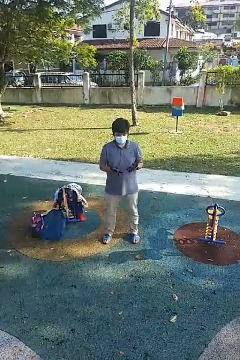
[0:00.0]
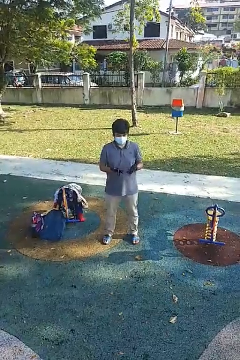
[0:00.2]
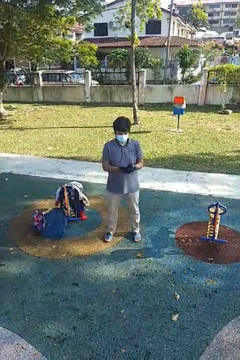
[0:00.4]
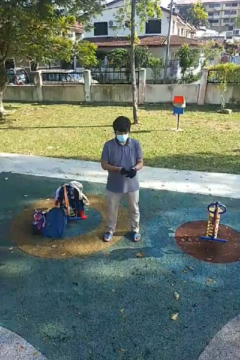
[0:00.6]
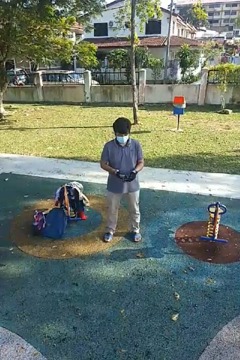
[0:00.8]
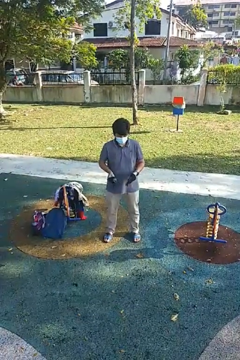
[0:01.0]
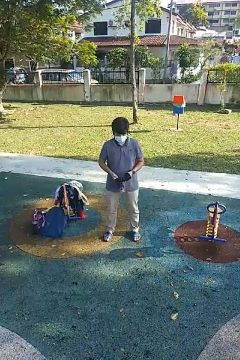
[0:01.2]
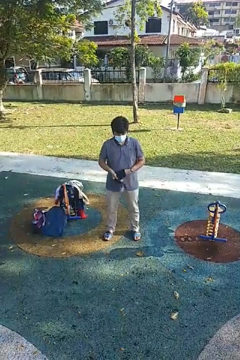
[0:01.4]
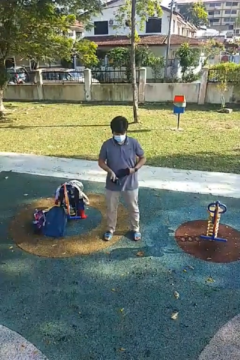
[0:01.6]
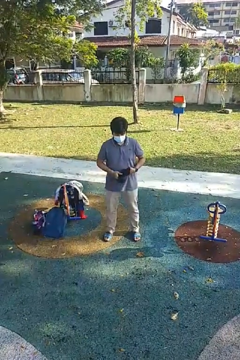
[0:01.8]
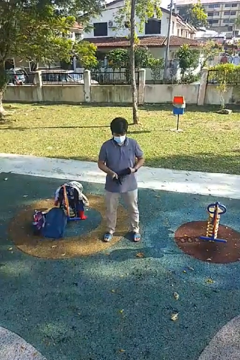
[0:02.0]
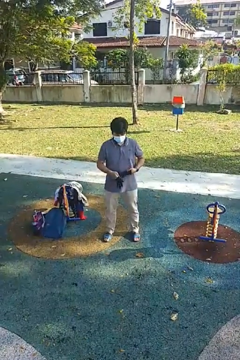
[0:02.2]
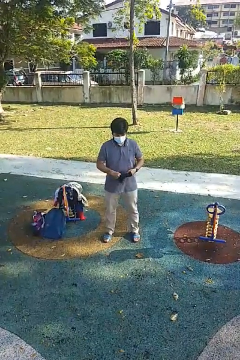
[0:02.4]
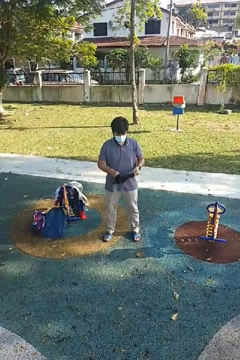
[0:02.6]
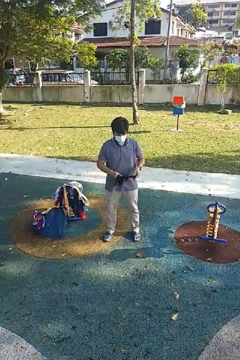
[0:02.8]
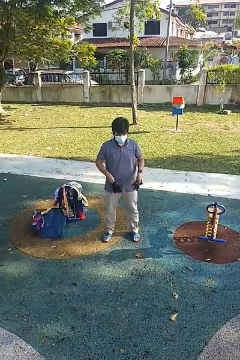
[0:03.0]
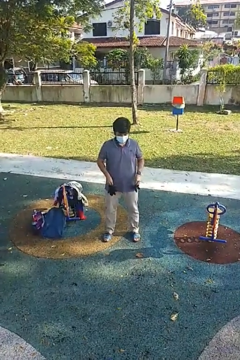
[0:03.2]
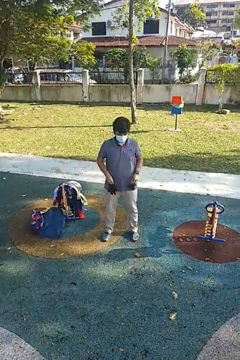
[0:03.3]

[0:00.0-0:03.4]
person takes off gloves

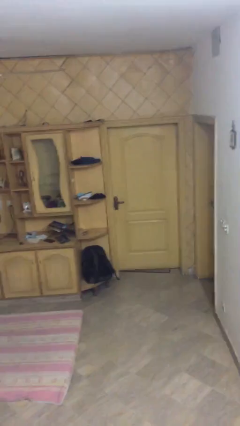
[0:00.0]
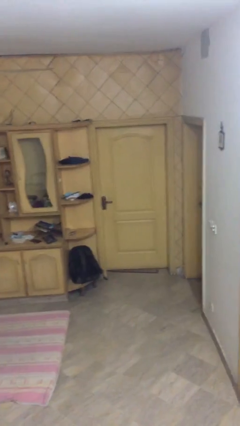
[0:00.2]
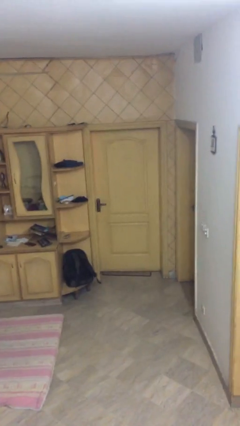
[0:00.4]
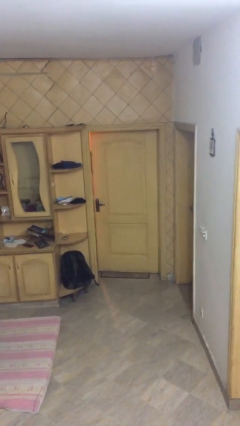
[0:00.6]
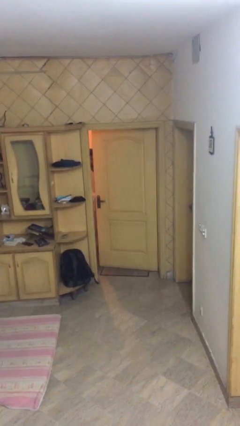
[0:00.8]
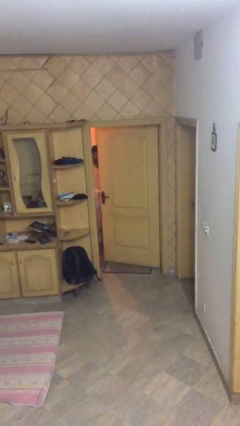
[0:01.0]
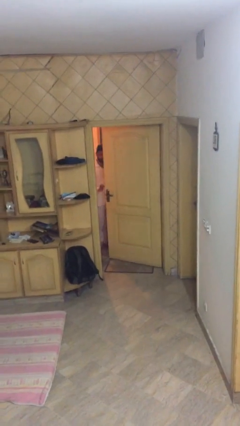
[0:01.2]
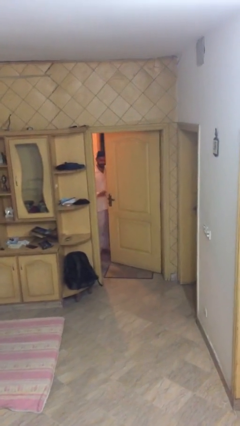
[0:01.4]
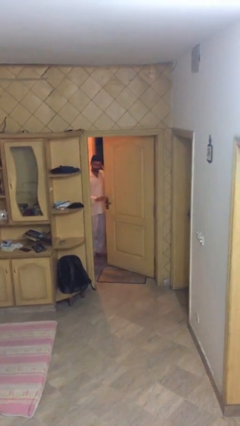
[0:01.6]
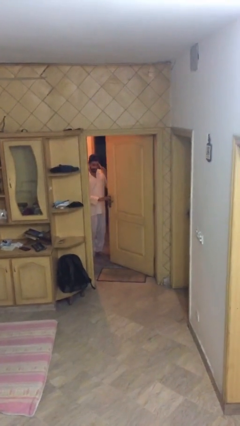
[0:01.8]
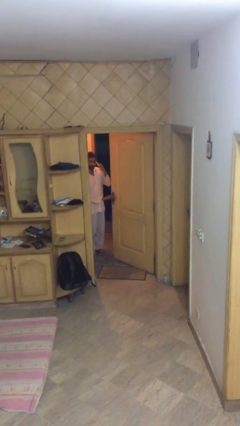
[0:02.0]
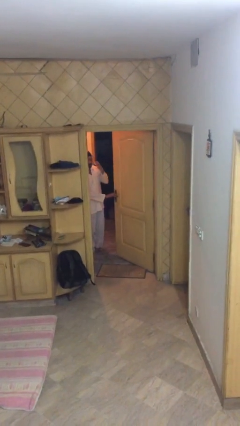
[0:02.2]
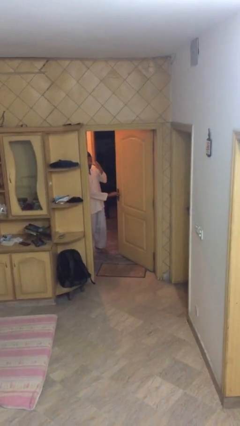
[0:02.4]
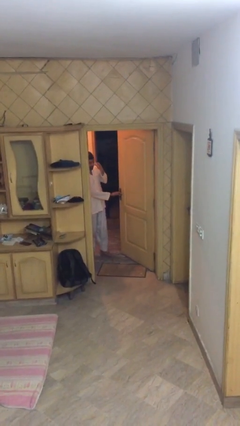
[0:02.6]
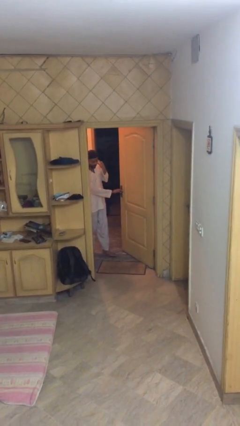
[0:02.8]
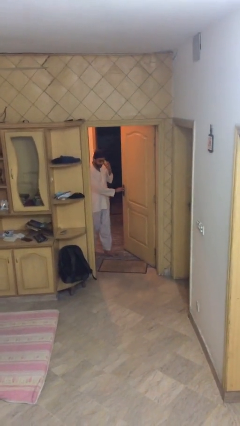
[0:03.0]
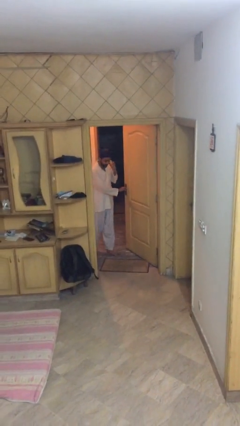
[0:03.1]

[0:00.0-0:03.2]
person opens facility door

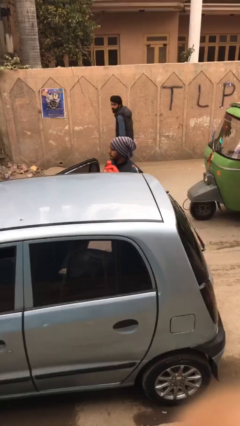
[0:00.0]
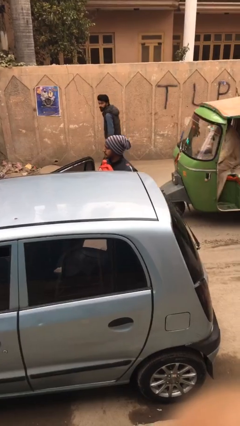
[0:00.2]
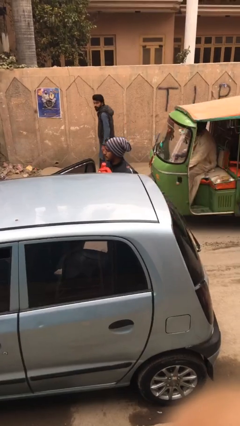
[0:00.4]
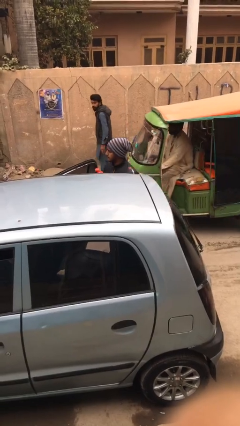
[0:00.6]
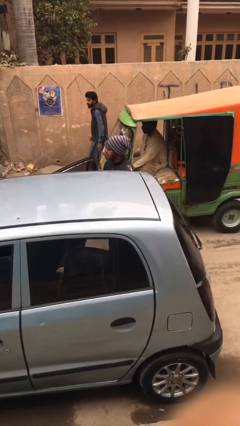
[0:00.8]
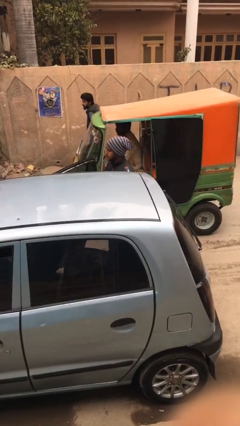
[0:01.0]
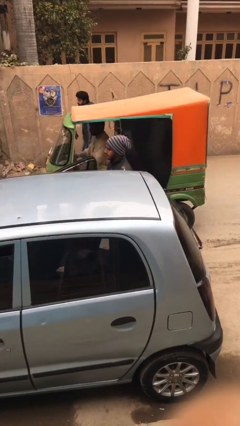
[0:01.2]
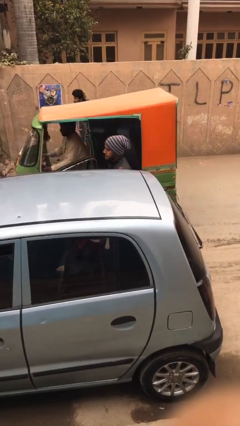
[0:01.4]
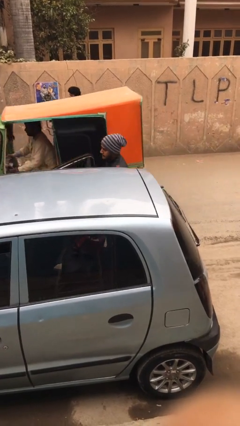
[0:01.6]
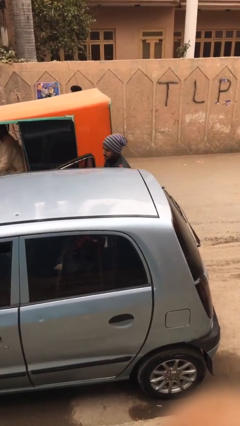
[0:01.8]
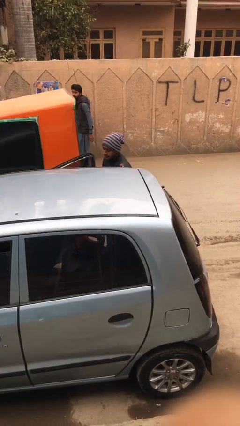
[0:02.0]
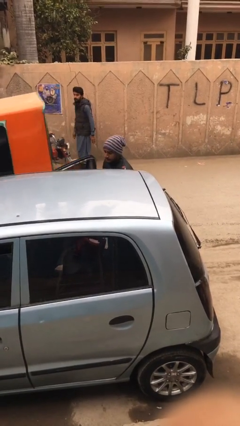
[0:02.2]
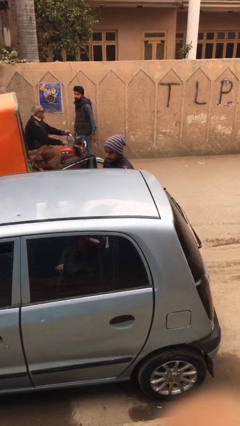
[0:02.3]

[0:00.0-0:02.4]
person loads car

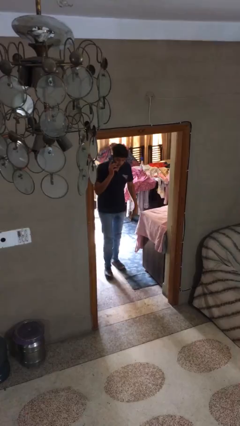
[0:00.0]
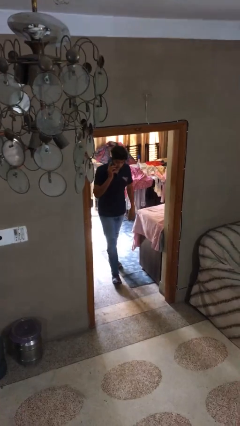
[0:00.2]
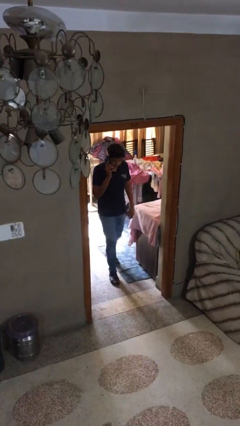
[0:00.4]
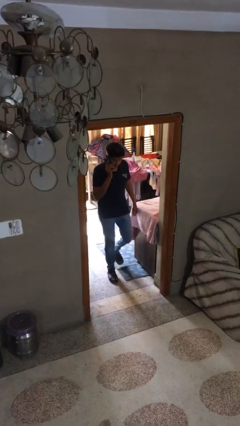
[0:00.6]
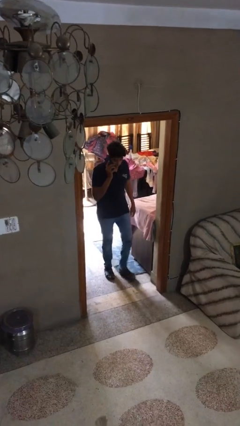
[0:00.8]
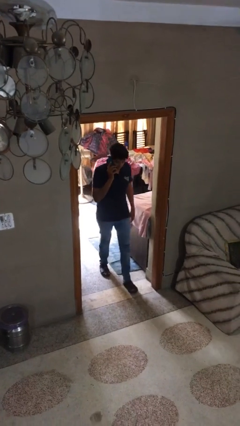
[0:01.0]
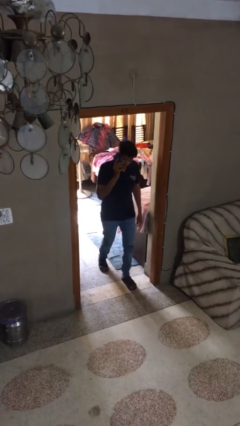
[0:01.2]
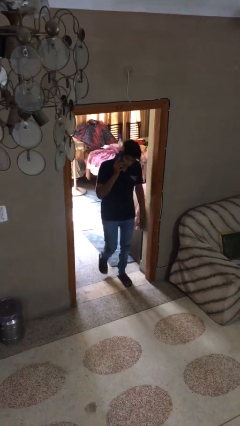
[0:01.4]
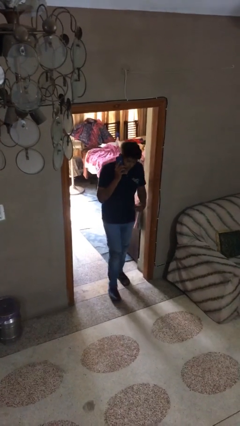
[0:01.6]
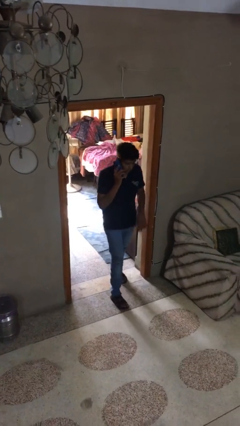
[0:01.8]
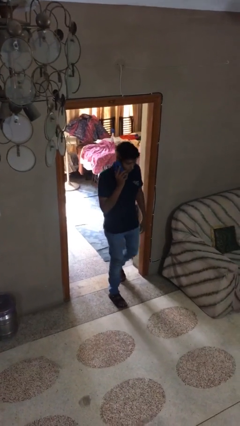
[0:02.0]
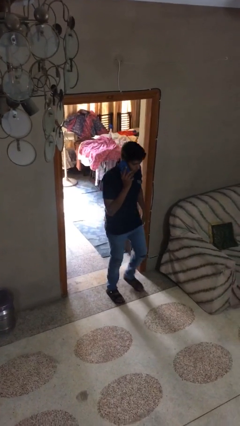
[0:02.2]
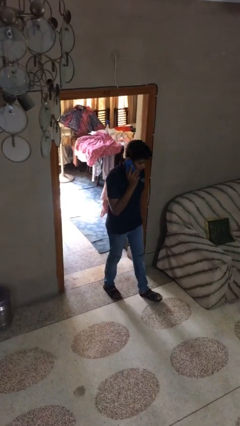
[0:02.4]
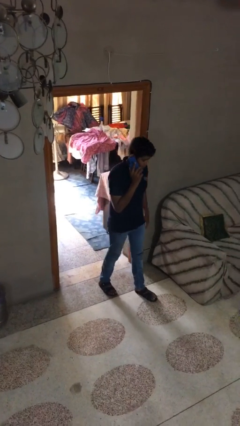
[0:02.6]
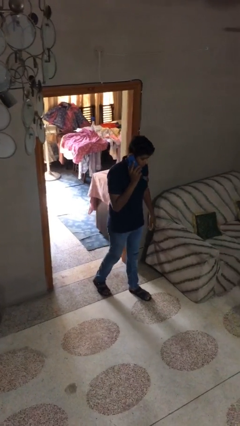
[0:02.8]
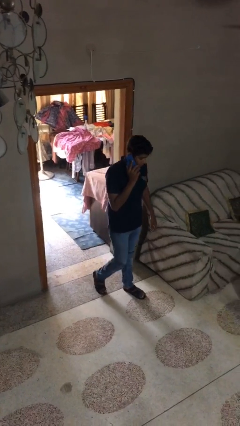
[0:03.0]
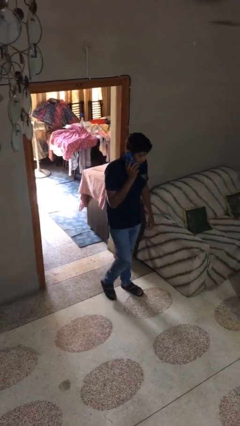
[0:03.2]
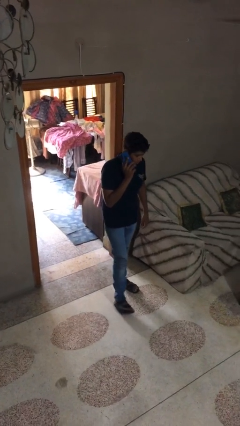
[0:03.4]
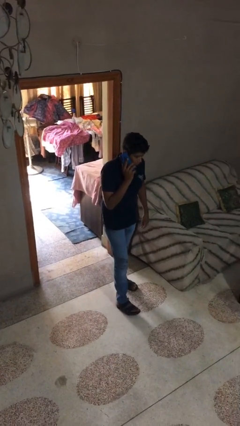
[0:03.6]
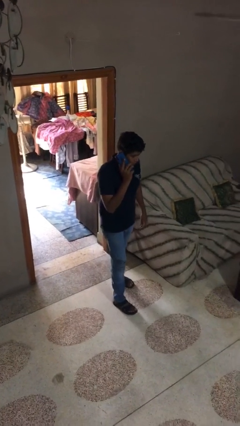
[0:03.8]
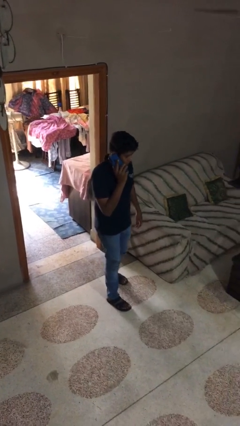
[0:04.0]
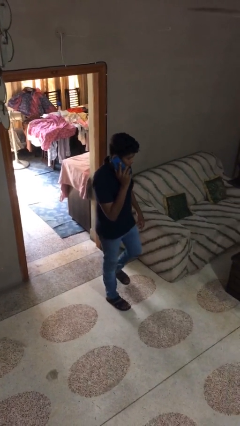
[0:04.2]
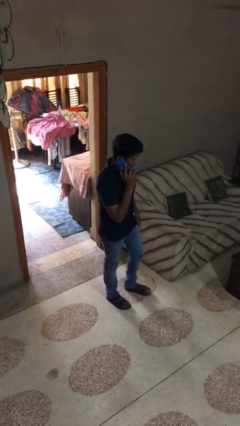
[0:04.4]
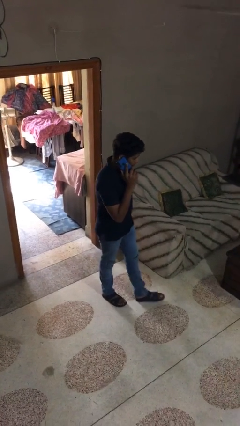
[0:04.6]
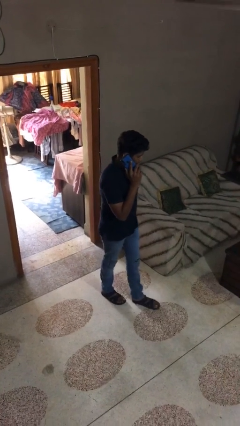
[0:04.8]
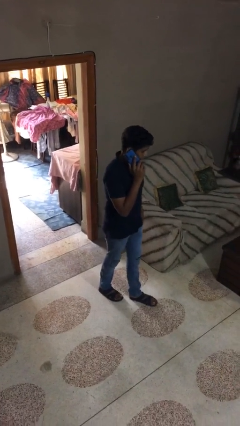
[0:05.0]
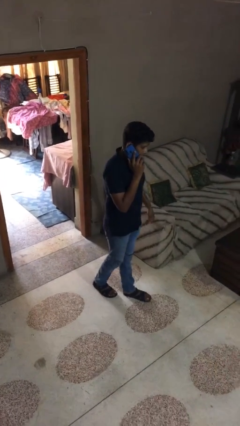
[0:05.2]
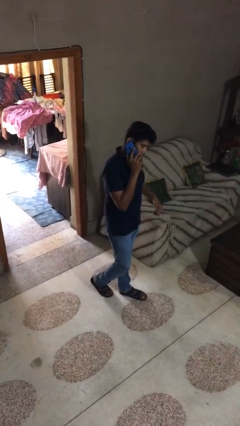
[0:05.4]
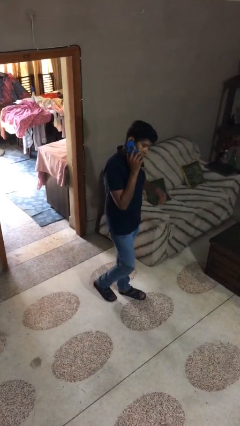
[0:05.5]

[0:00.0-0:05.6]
person enters scene through structure

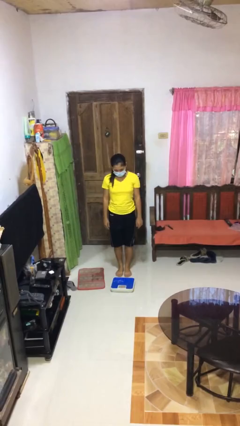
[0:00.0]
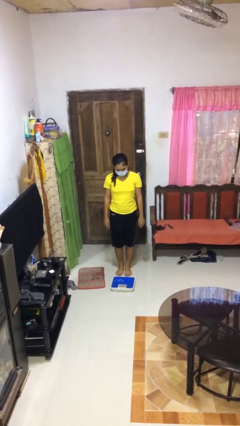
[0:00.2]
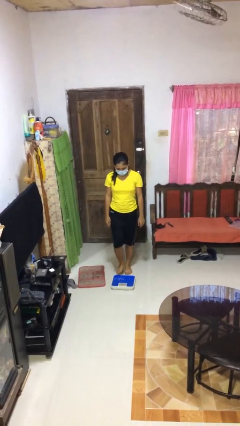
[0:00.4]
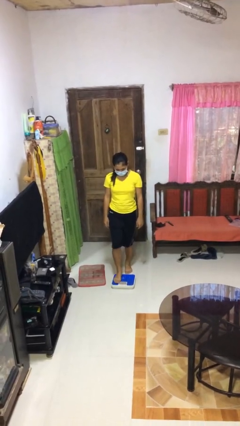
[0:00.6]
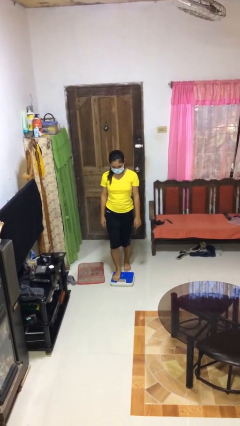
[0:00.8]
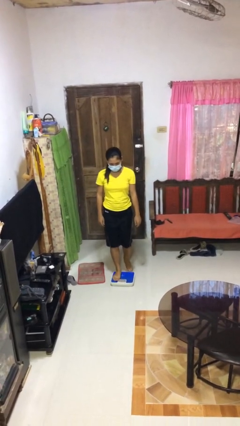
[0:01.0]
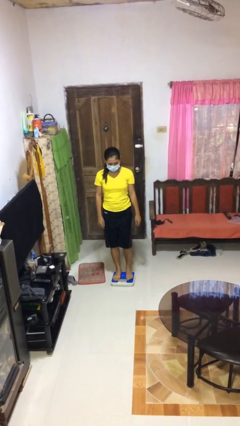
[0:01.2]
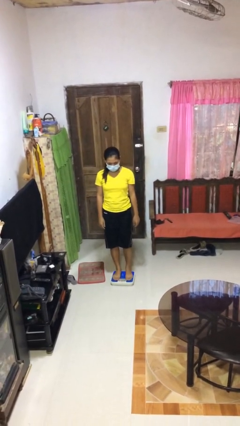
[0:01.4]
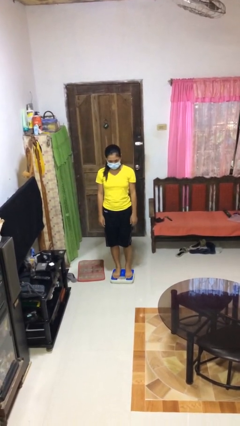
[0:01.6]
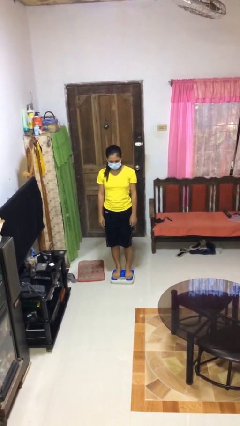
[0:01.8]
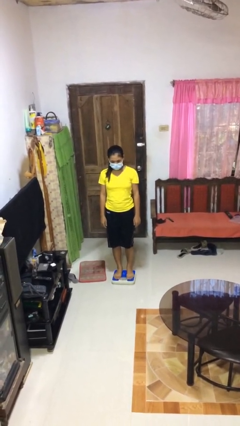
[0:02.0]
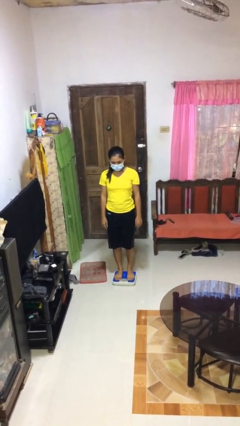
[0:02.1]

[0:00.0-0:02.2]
person uses bodyweight scale

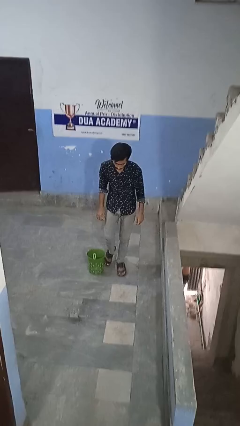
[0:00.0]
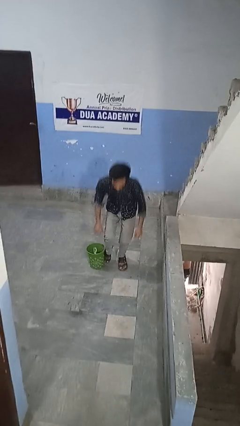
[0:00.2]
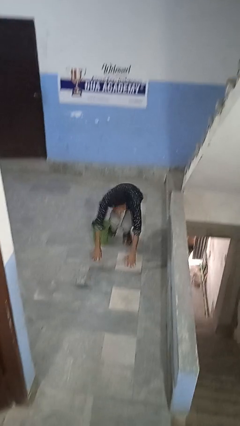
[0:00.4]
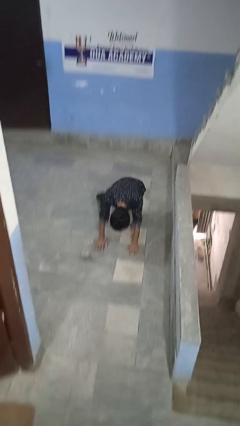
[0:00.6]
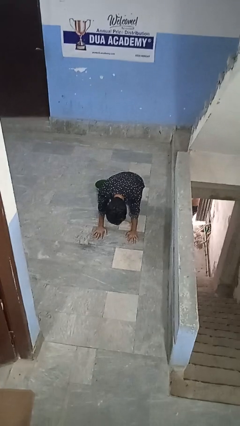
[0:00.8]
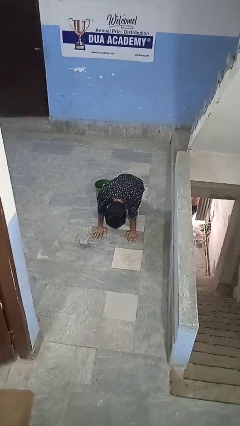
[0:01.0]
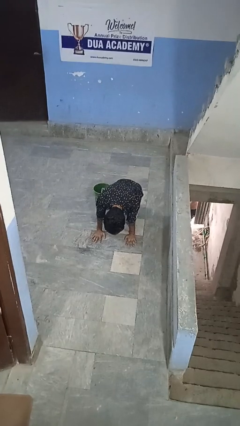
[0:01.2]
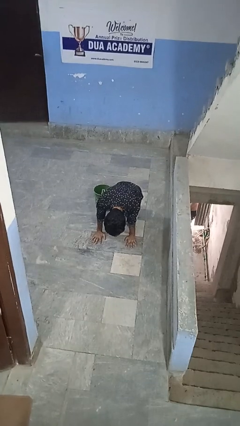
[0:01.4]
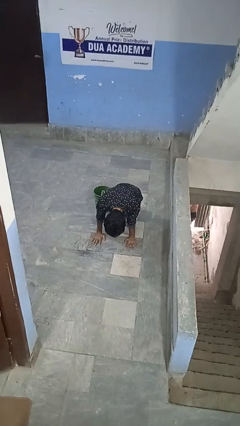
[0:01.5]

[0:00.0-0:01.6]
person trips on object on floor
